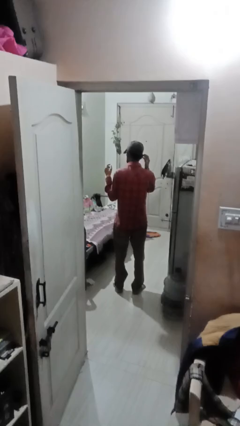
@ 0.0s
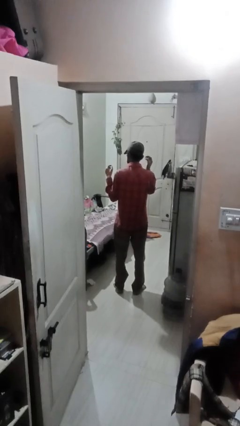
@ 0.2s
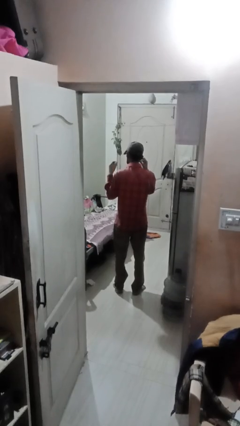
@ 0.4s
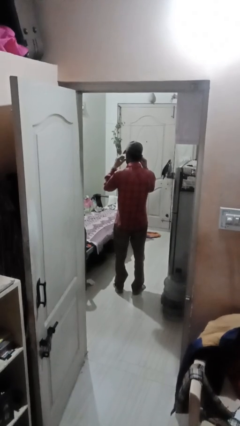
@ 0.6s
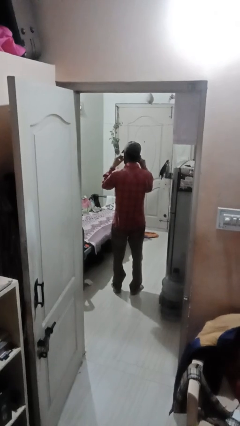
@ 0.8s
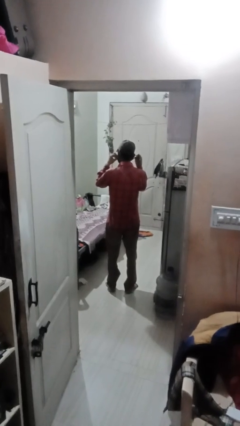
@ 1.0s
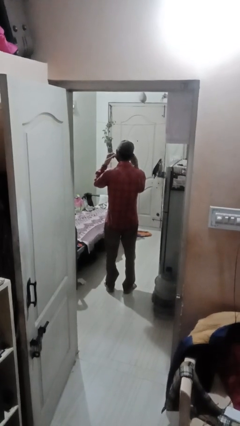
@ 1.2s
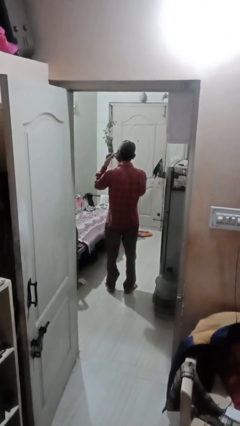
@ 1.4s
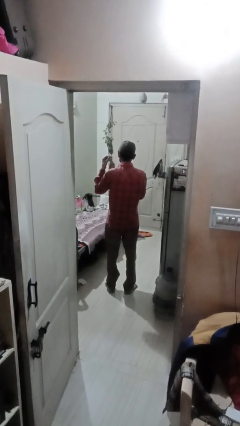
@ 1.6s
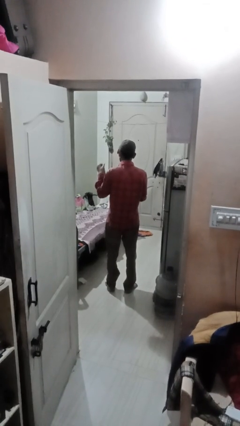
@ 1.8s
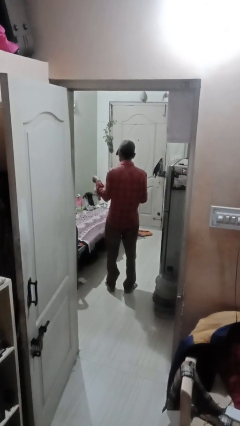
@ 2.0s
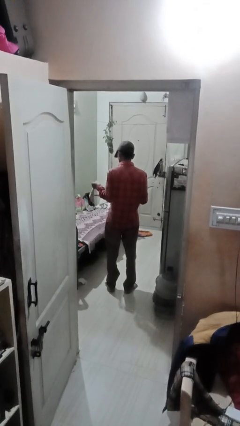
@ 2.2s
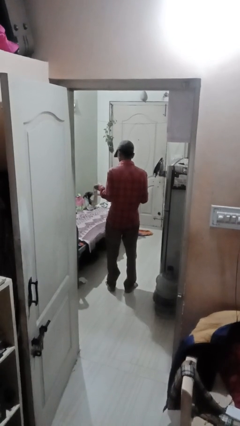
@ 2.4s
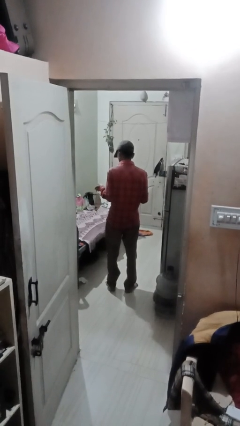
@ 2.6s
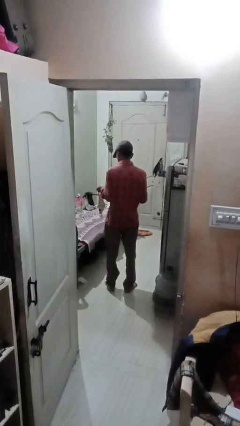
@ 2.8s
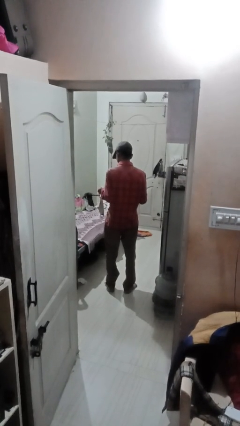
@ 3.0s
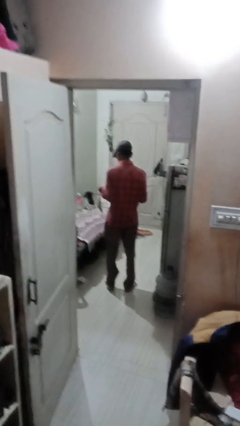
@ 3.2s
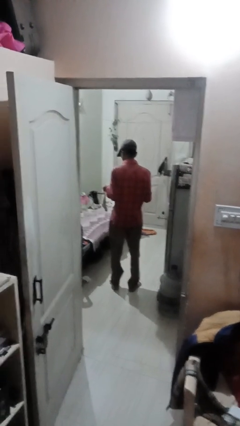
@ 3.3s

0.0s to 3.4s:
person takes off facemask

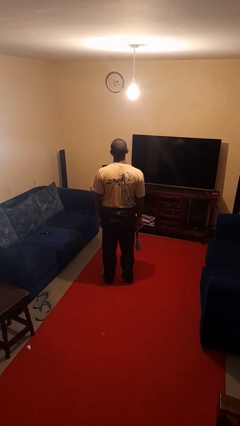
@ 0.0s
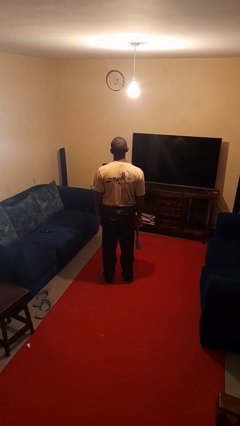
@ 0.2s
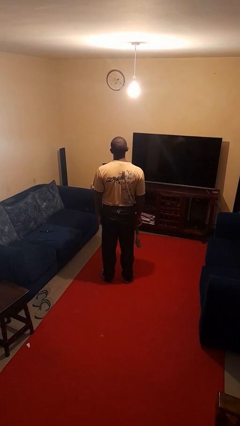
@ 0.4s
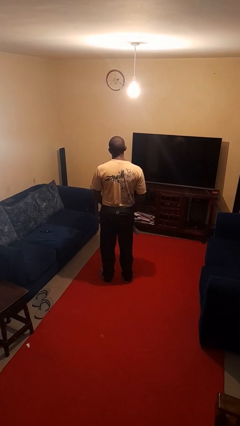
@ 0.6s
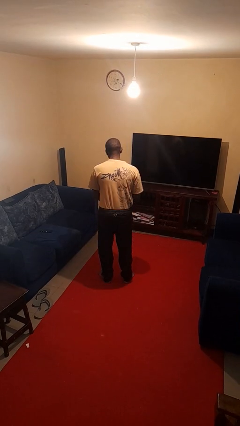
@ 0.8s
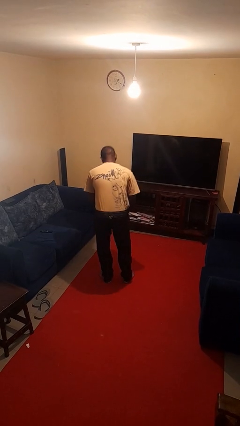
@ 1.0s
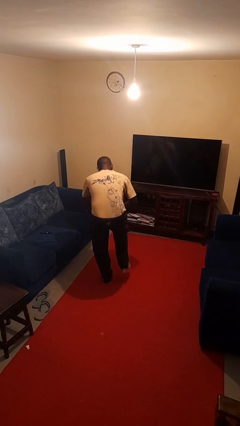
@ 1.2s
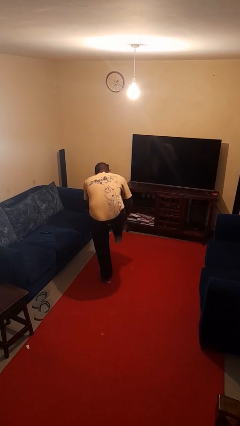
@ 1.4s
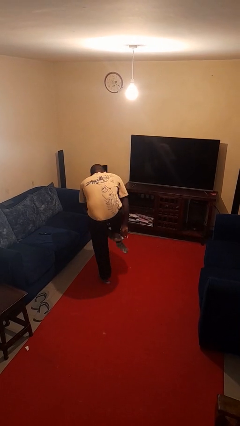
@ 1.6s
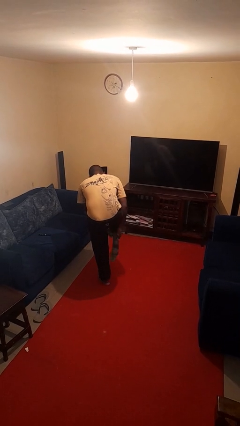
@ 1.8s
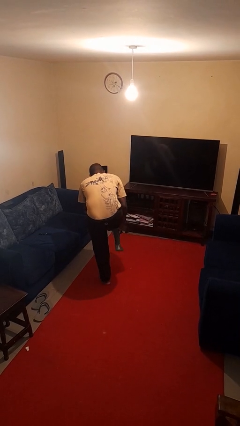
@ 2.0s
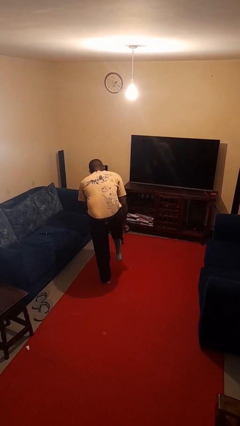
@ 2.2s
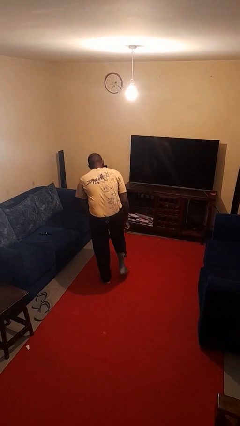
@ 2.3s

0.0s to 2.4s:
person puts on socks

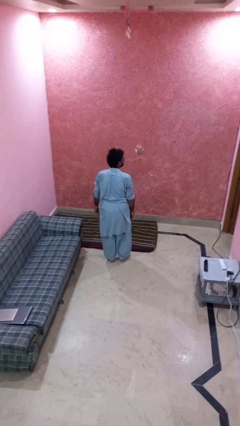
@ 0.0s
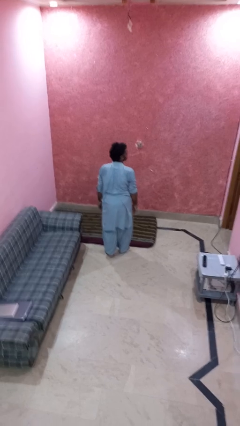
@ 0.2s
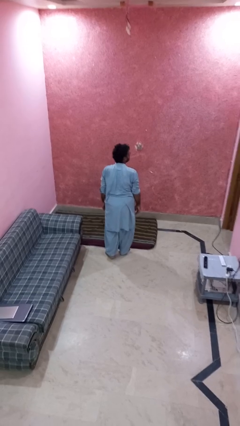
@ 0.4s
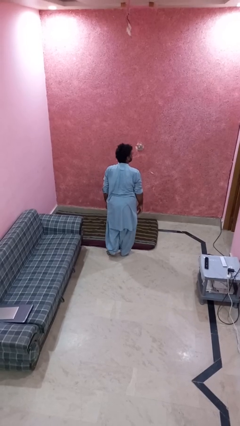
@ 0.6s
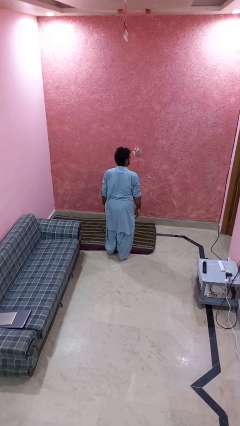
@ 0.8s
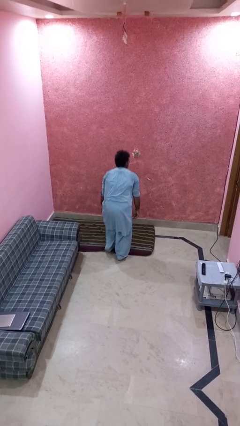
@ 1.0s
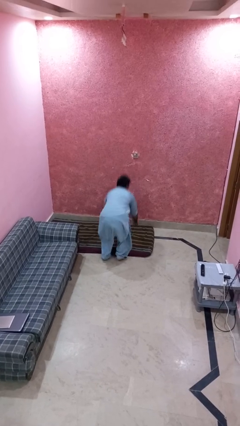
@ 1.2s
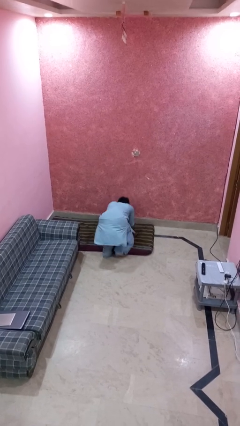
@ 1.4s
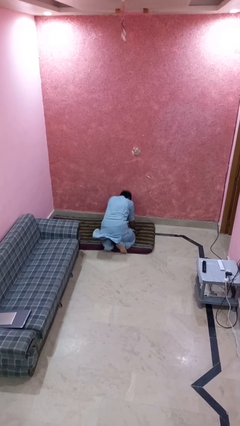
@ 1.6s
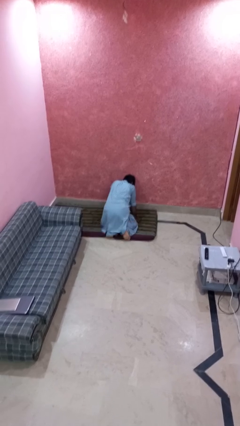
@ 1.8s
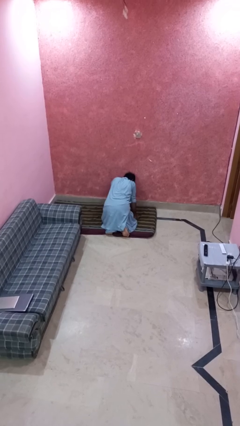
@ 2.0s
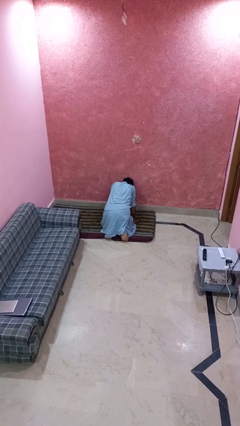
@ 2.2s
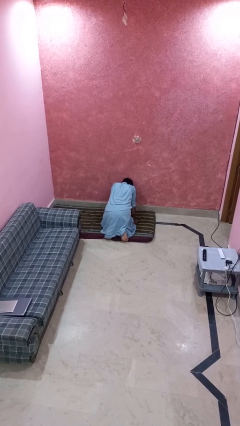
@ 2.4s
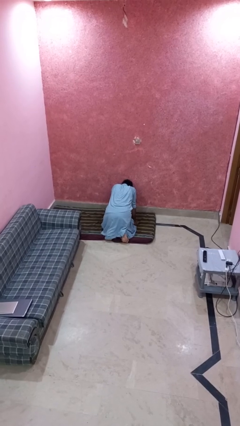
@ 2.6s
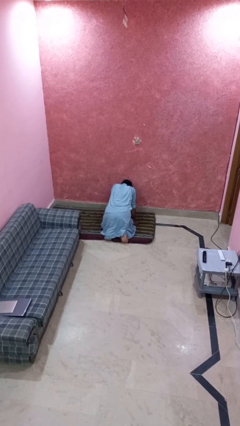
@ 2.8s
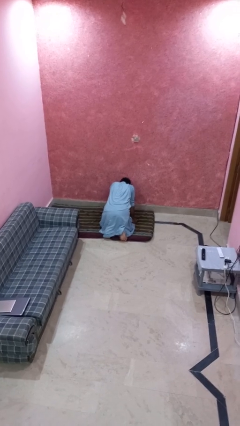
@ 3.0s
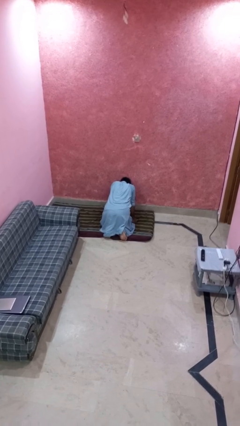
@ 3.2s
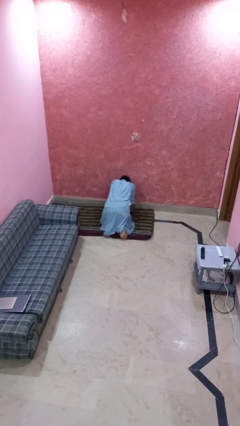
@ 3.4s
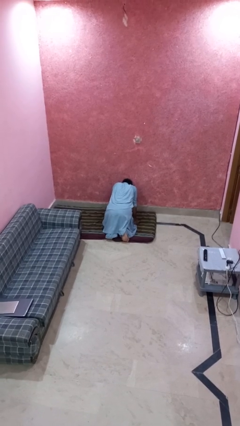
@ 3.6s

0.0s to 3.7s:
person trips on object on floor

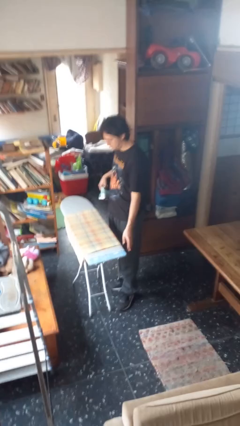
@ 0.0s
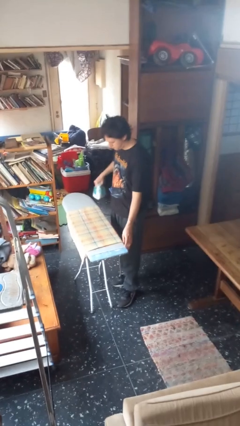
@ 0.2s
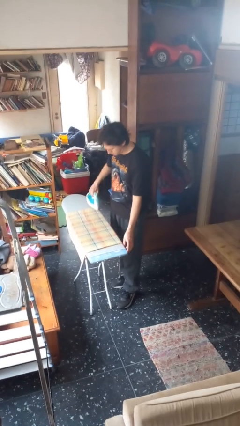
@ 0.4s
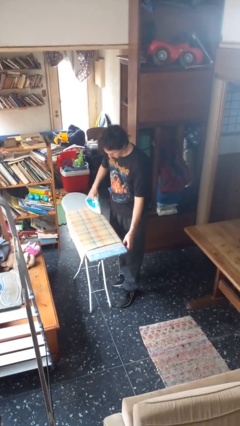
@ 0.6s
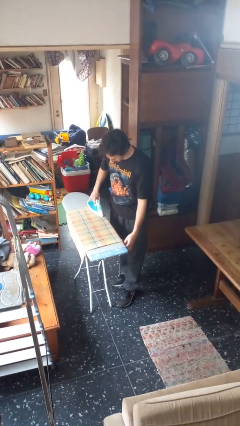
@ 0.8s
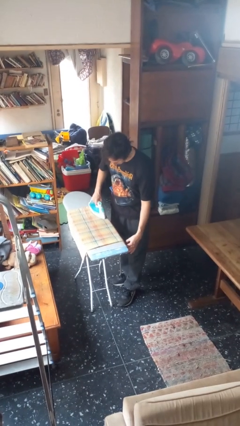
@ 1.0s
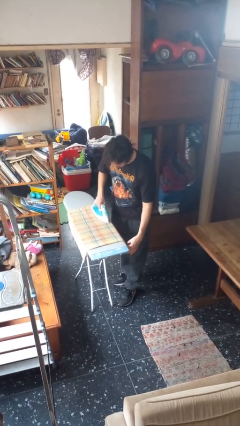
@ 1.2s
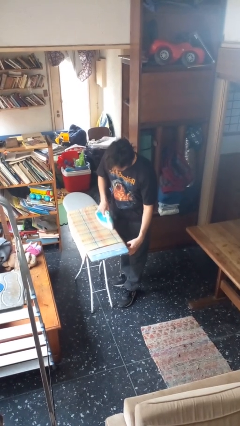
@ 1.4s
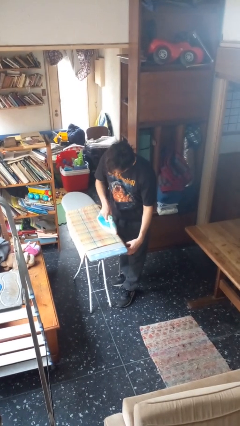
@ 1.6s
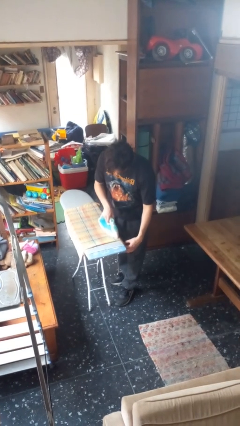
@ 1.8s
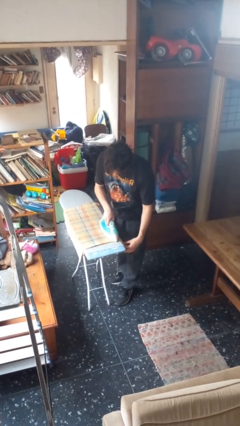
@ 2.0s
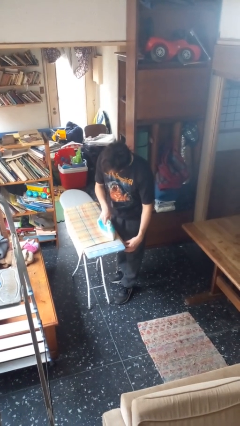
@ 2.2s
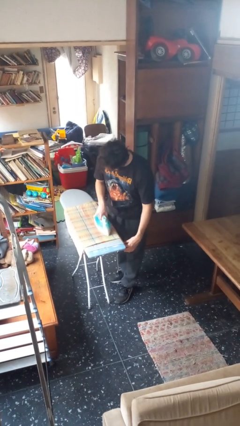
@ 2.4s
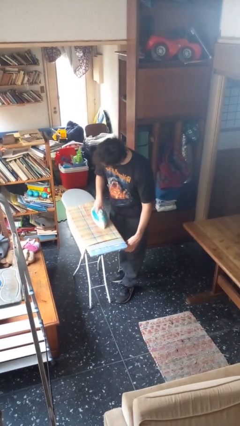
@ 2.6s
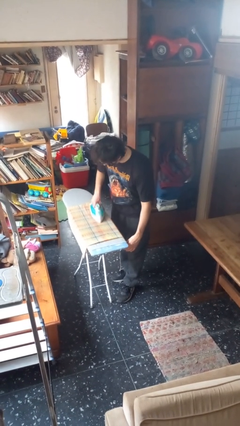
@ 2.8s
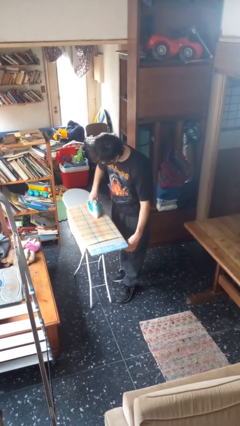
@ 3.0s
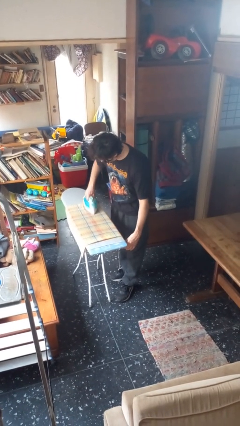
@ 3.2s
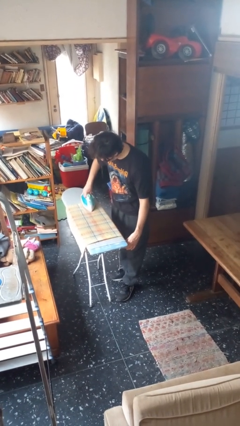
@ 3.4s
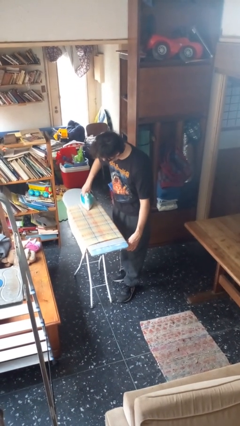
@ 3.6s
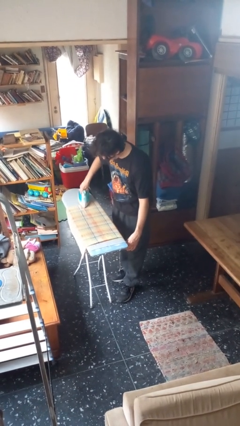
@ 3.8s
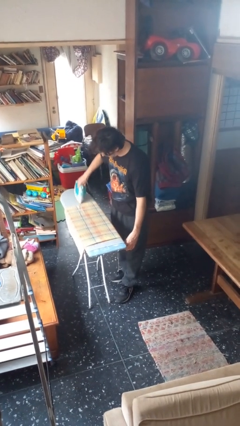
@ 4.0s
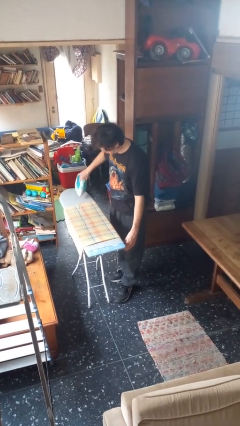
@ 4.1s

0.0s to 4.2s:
person irons clothes

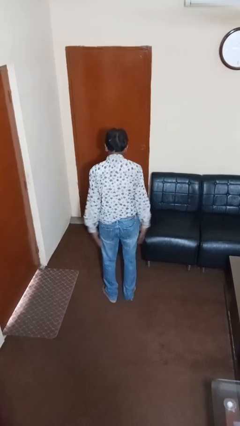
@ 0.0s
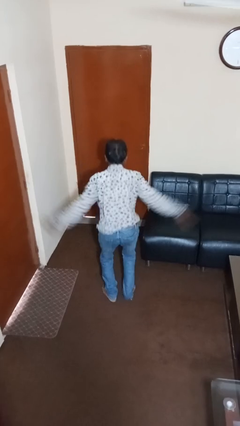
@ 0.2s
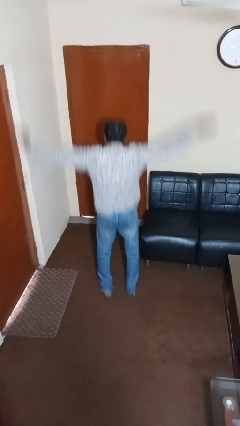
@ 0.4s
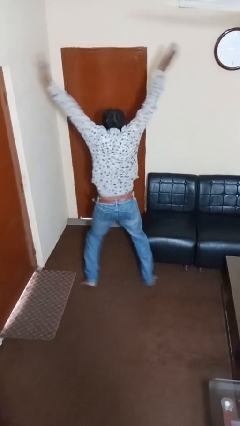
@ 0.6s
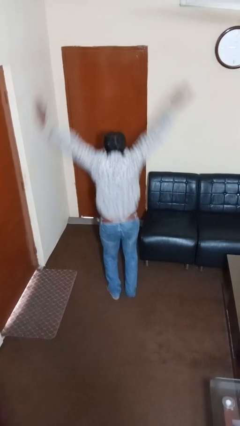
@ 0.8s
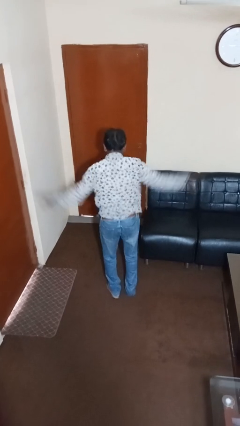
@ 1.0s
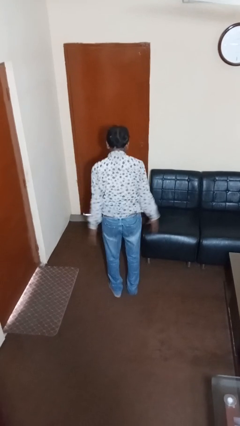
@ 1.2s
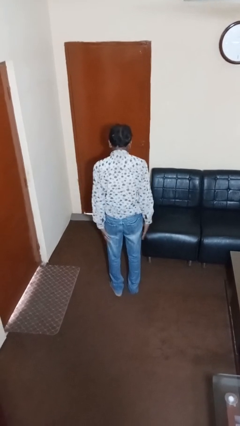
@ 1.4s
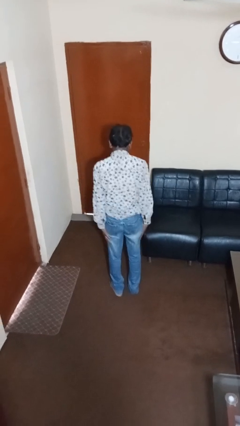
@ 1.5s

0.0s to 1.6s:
person exercises with jumping jacks

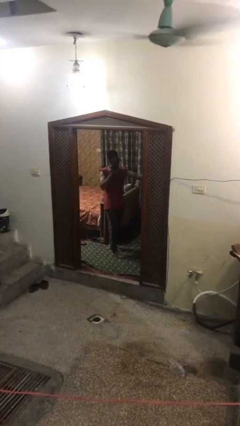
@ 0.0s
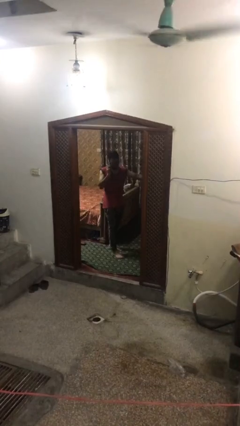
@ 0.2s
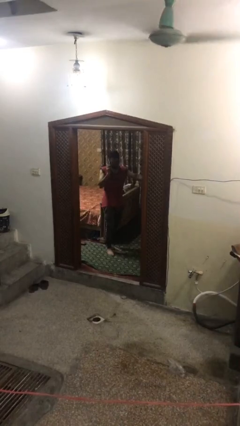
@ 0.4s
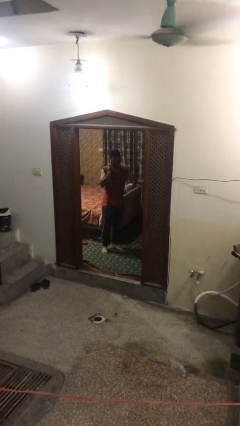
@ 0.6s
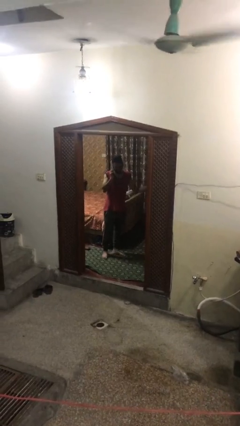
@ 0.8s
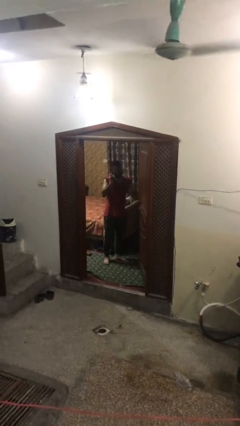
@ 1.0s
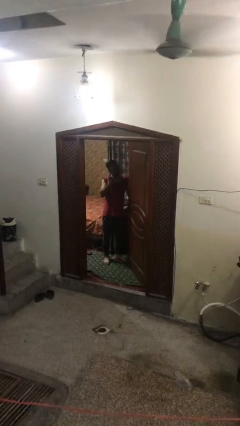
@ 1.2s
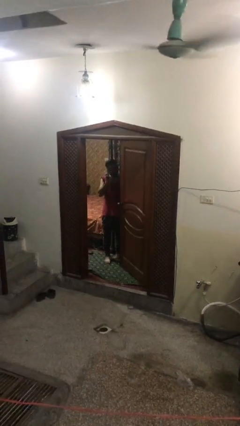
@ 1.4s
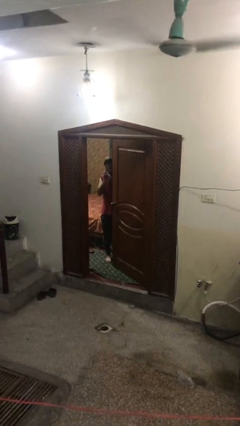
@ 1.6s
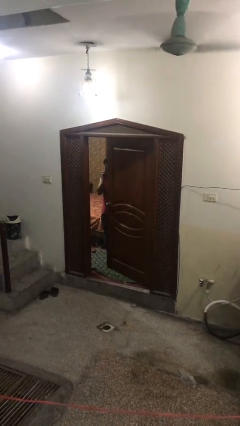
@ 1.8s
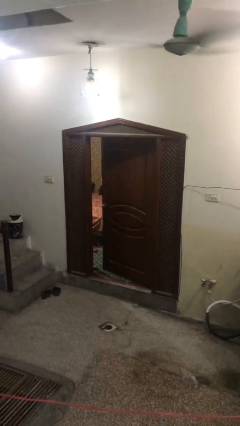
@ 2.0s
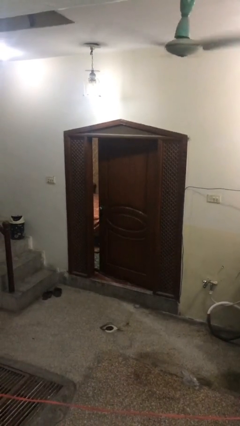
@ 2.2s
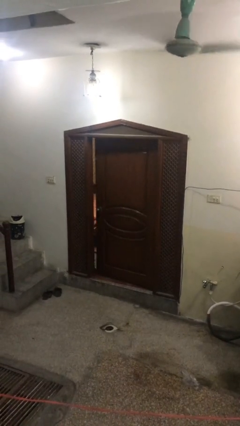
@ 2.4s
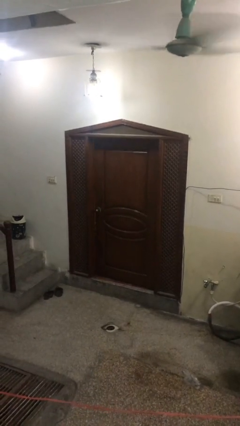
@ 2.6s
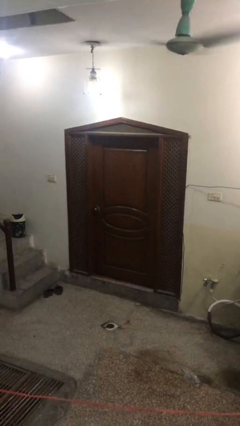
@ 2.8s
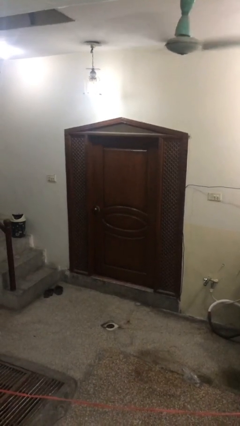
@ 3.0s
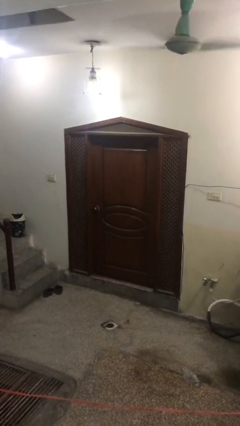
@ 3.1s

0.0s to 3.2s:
person closes facility door
